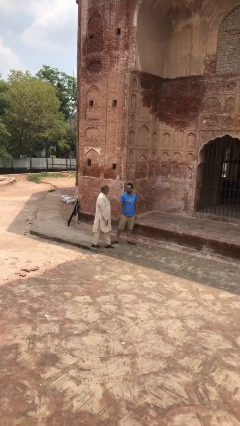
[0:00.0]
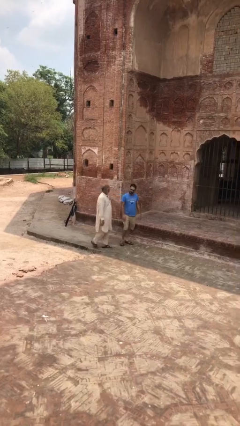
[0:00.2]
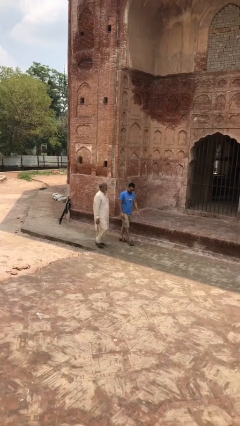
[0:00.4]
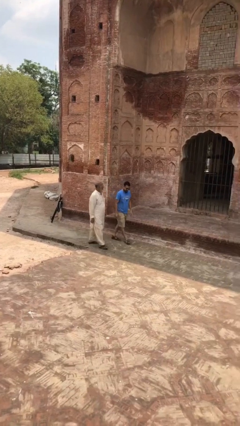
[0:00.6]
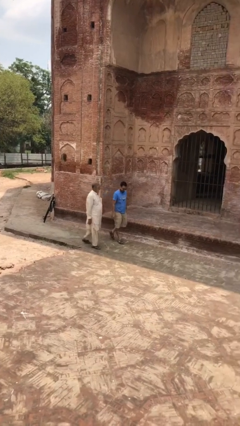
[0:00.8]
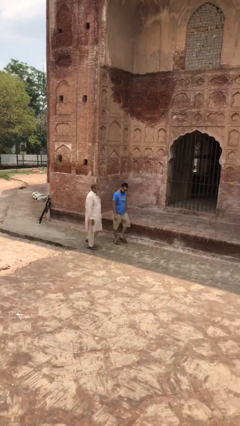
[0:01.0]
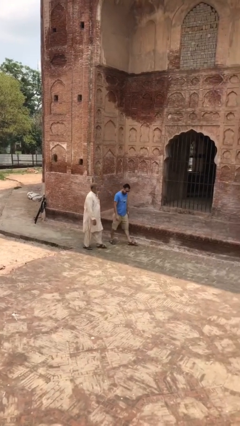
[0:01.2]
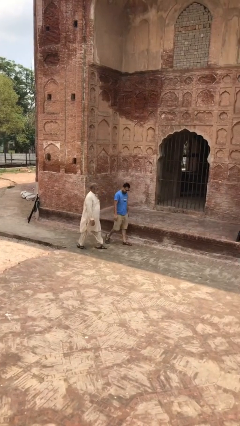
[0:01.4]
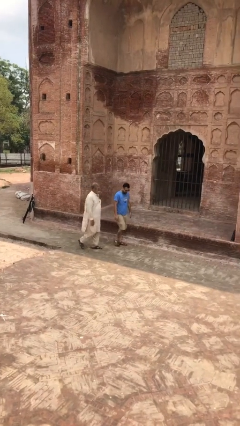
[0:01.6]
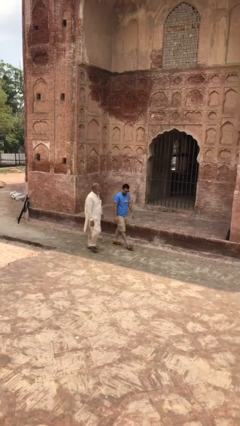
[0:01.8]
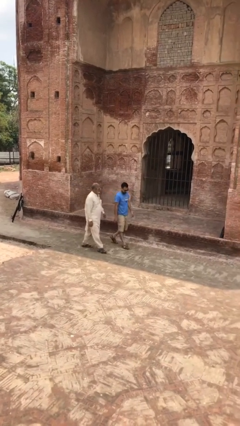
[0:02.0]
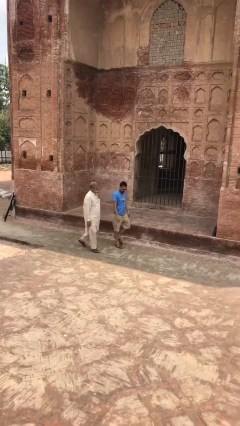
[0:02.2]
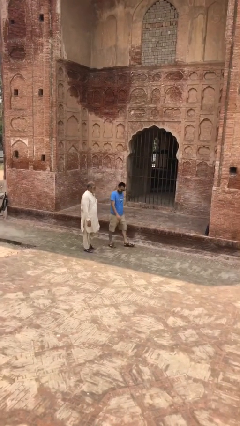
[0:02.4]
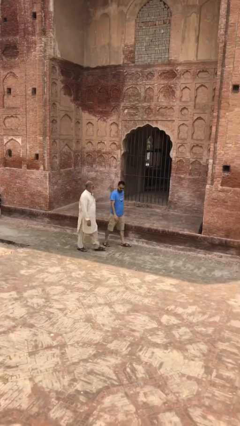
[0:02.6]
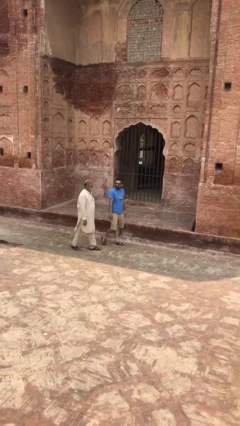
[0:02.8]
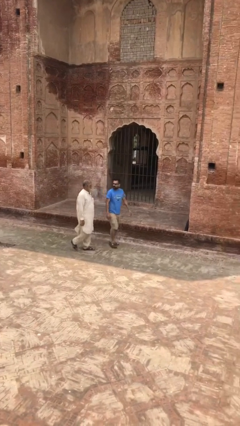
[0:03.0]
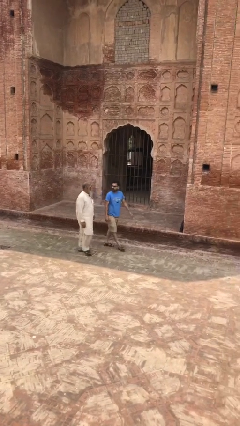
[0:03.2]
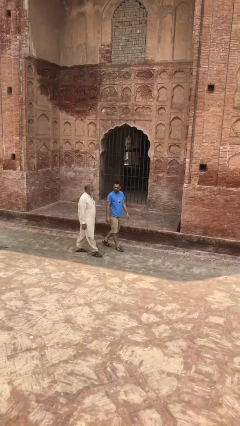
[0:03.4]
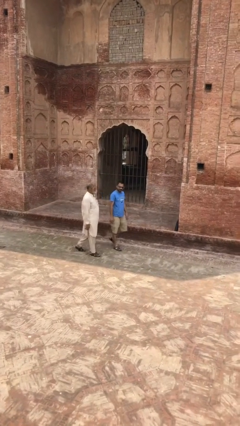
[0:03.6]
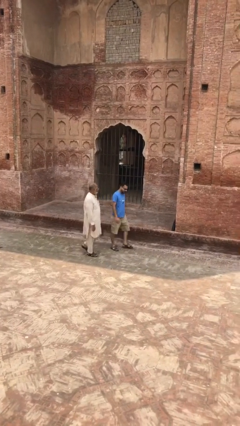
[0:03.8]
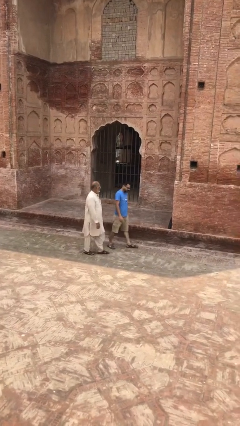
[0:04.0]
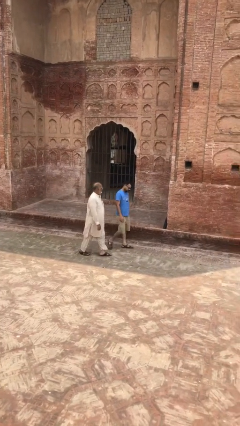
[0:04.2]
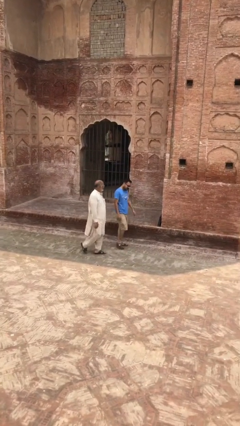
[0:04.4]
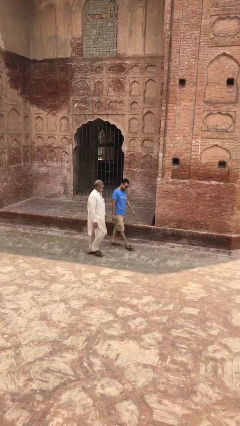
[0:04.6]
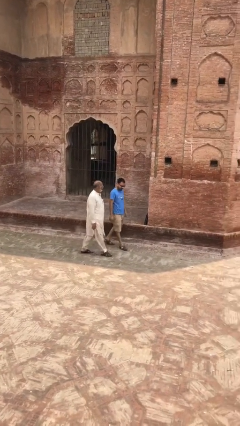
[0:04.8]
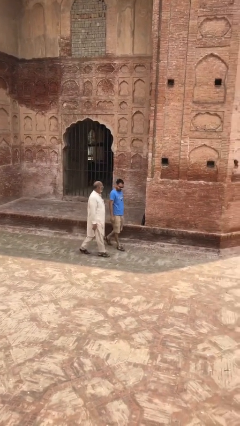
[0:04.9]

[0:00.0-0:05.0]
person talks to person

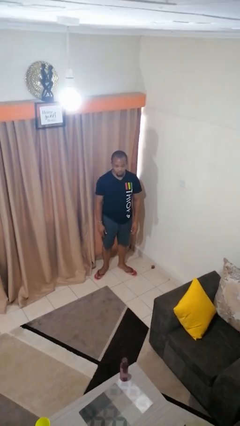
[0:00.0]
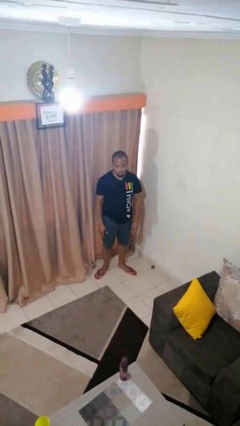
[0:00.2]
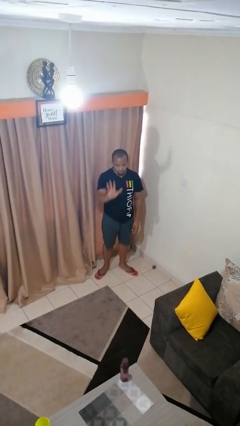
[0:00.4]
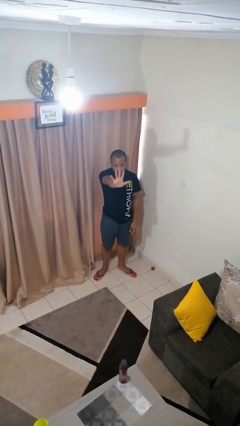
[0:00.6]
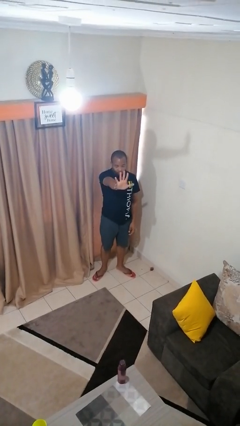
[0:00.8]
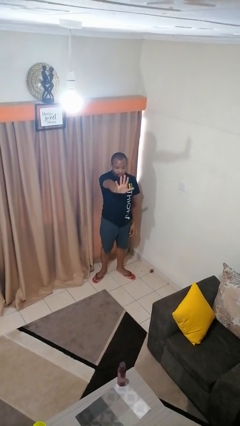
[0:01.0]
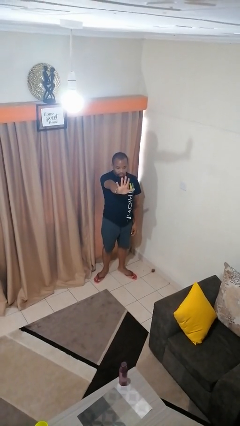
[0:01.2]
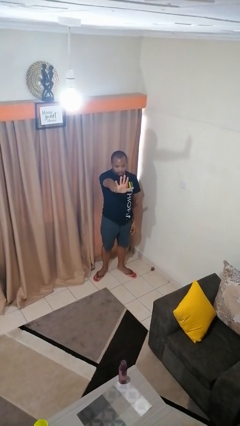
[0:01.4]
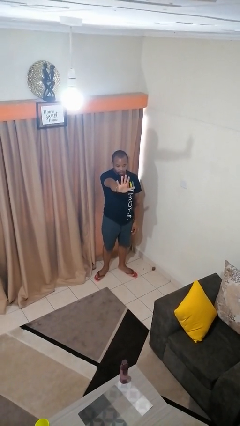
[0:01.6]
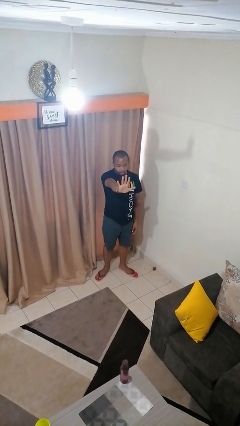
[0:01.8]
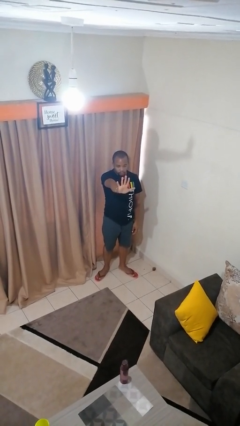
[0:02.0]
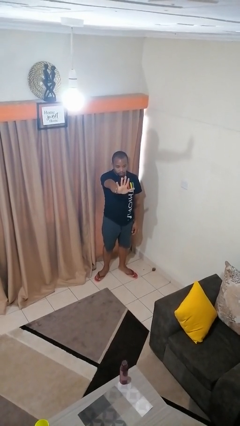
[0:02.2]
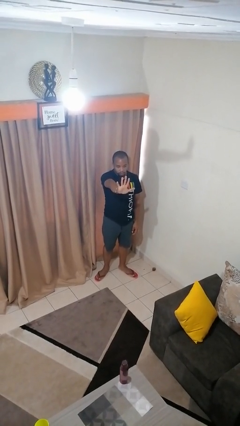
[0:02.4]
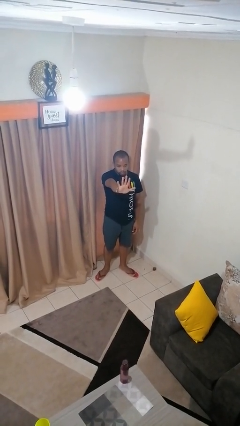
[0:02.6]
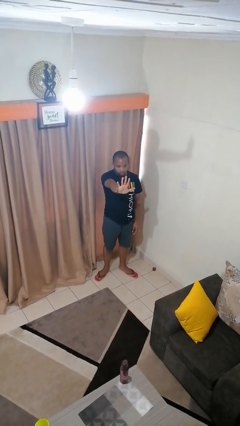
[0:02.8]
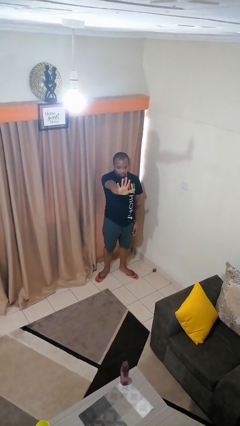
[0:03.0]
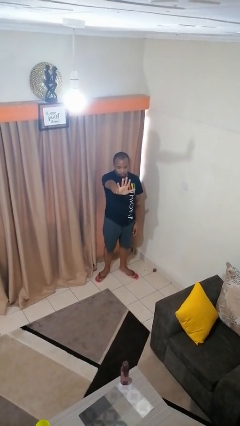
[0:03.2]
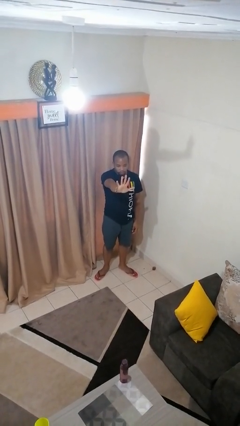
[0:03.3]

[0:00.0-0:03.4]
person gestures number five

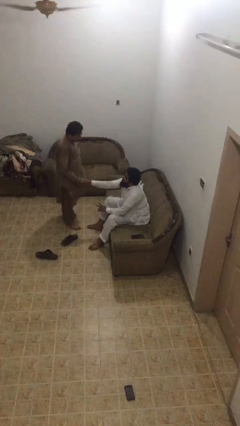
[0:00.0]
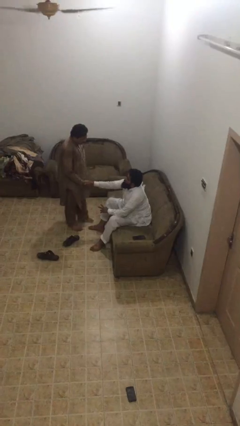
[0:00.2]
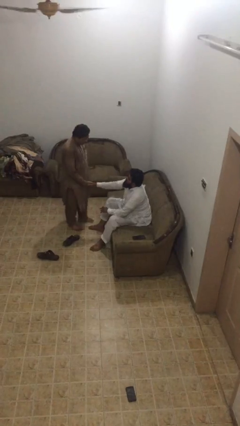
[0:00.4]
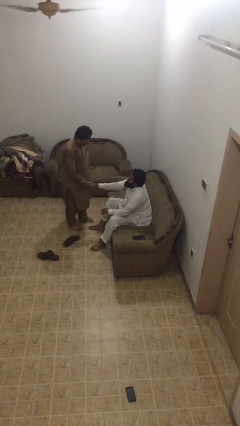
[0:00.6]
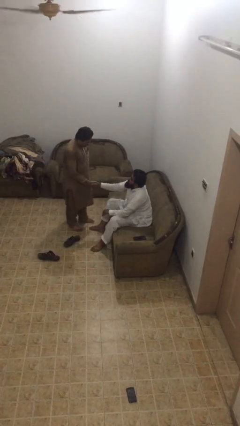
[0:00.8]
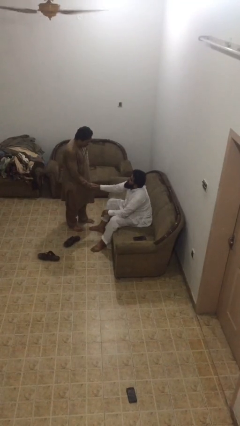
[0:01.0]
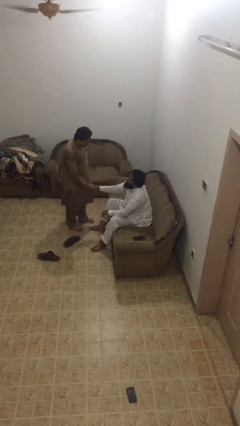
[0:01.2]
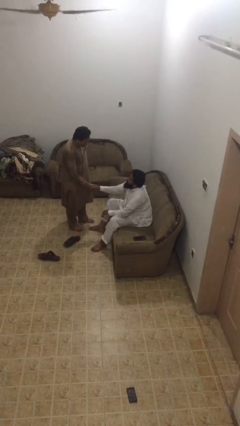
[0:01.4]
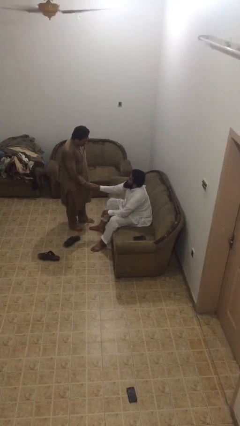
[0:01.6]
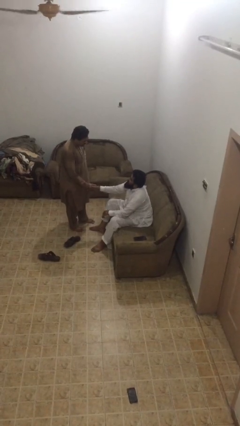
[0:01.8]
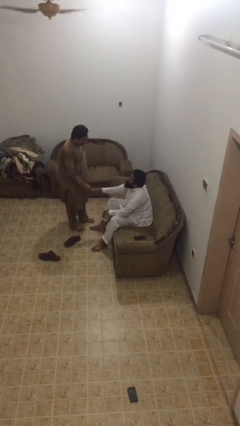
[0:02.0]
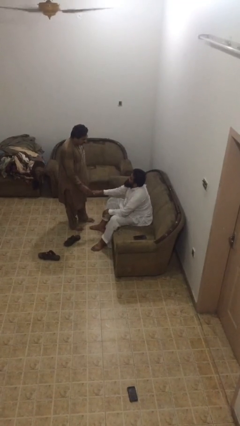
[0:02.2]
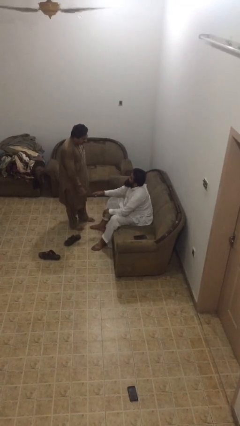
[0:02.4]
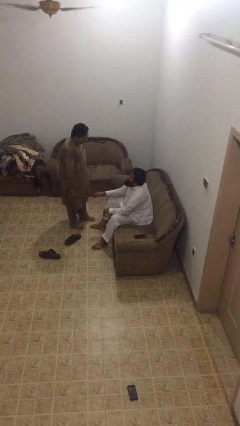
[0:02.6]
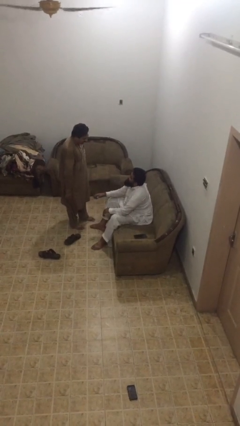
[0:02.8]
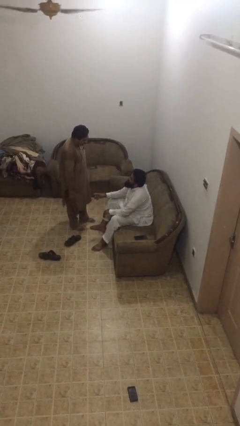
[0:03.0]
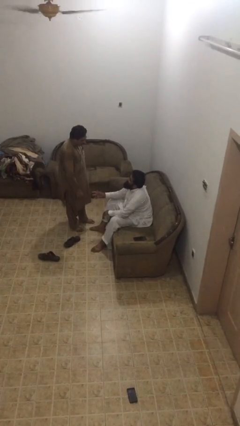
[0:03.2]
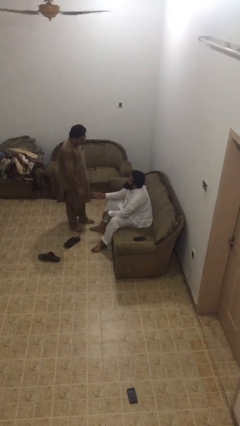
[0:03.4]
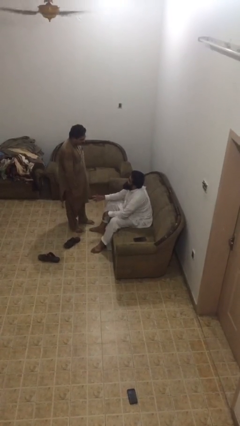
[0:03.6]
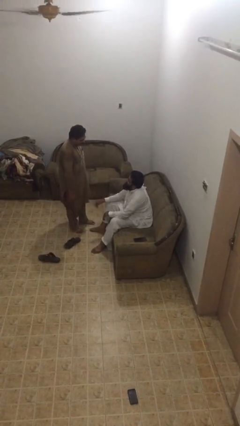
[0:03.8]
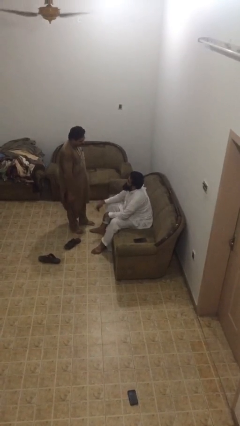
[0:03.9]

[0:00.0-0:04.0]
person shakes hand

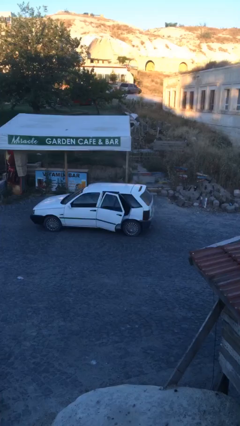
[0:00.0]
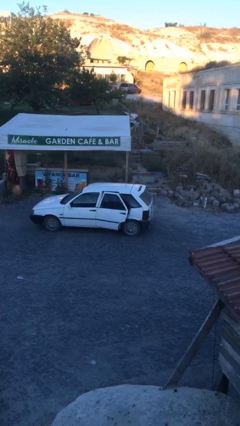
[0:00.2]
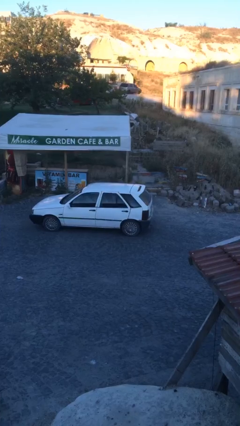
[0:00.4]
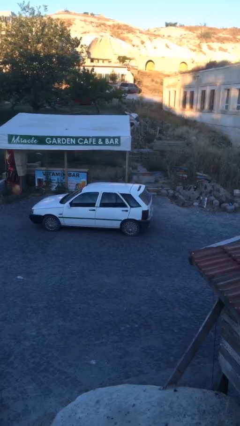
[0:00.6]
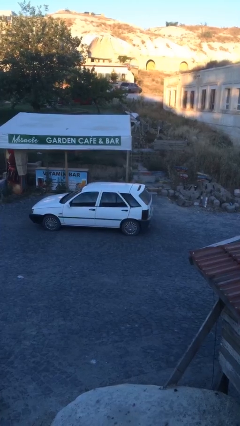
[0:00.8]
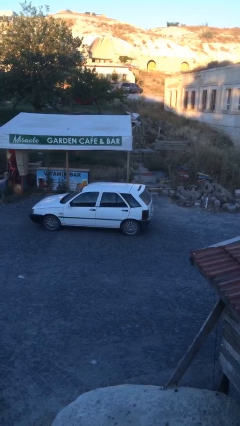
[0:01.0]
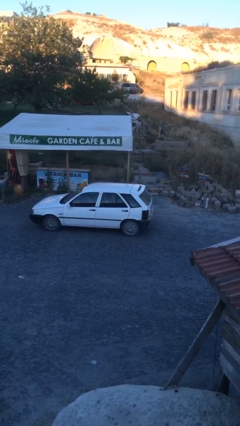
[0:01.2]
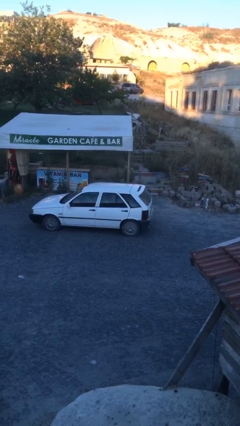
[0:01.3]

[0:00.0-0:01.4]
person closes car door

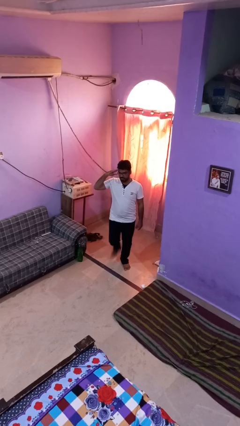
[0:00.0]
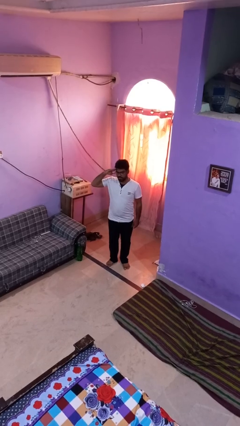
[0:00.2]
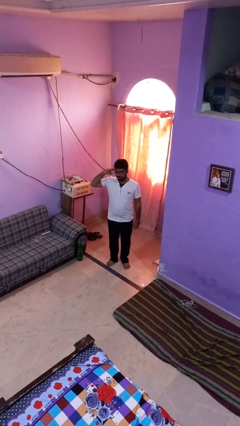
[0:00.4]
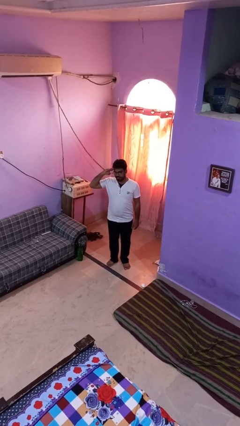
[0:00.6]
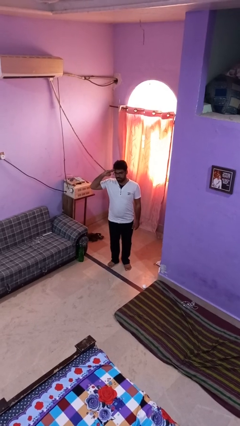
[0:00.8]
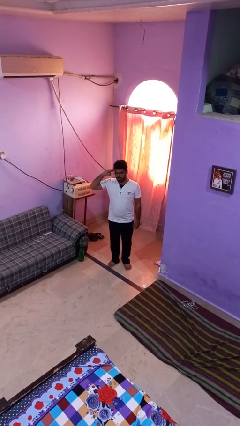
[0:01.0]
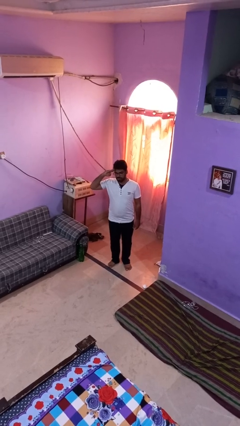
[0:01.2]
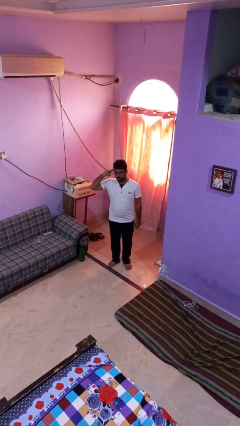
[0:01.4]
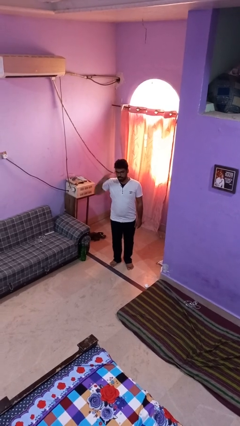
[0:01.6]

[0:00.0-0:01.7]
person salutes

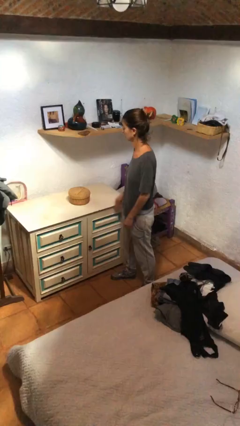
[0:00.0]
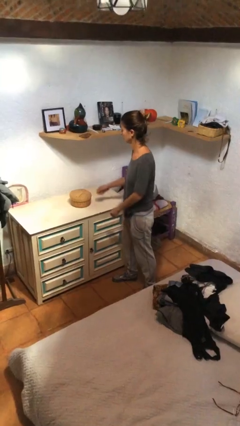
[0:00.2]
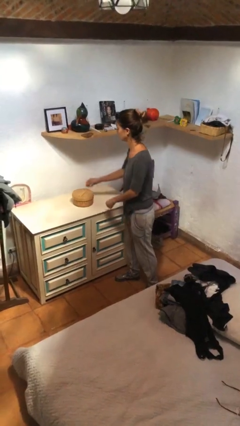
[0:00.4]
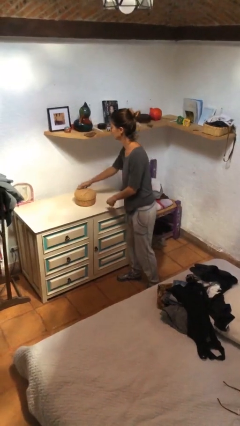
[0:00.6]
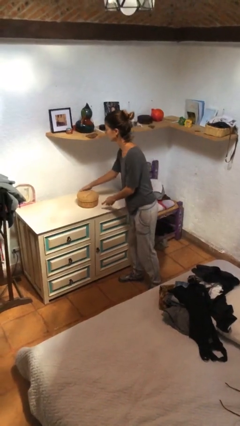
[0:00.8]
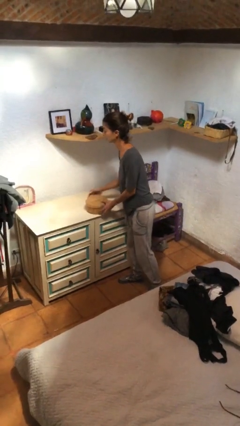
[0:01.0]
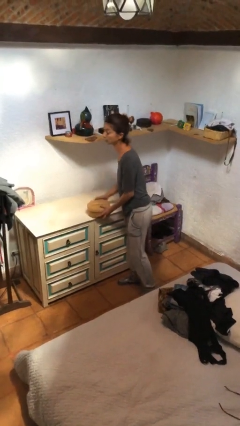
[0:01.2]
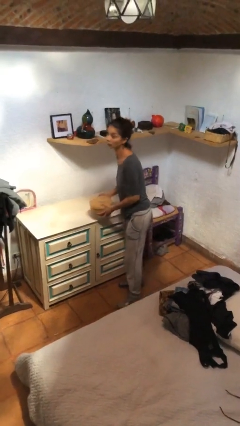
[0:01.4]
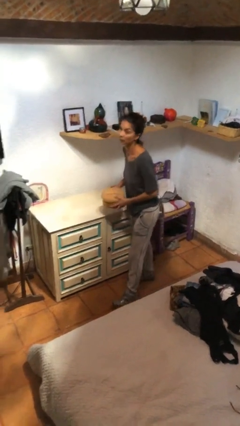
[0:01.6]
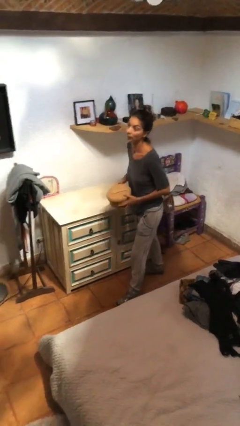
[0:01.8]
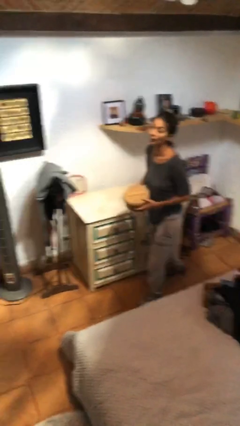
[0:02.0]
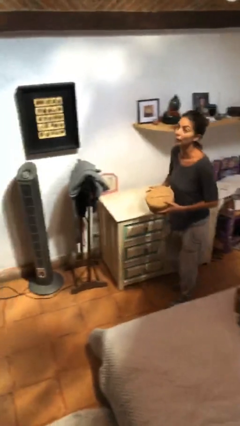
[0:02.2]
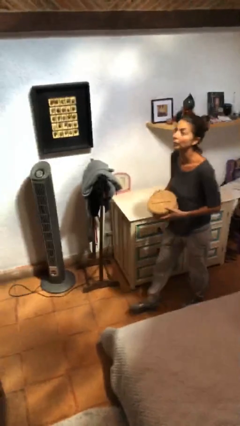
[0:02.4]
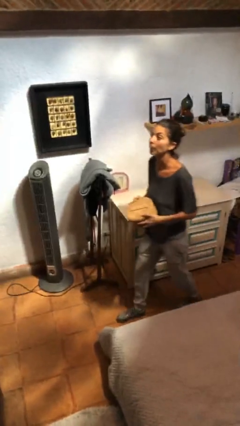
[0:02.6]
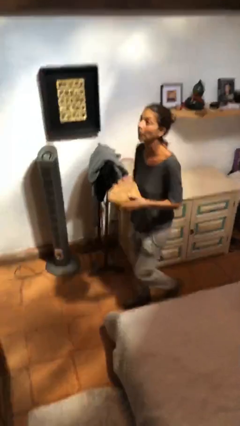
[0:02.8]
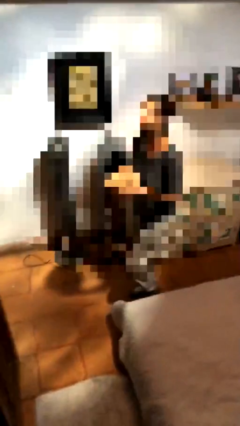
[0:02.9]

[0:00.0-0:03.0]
person picks up object from table
